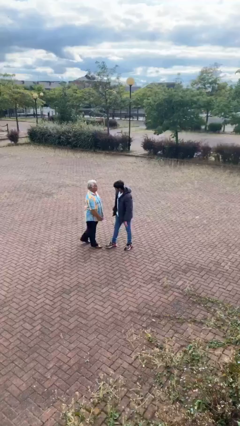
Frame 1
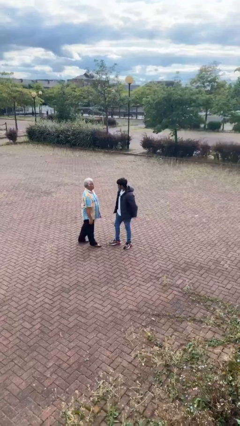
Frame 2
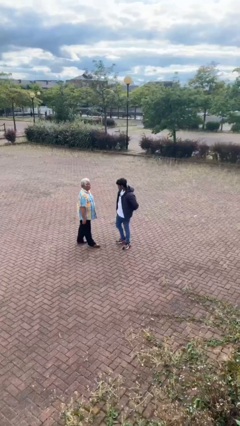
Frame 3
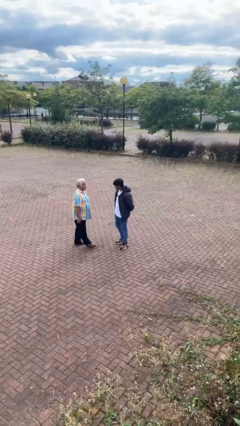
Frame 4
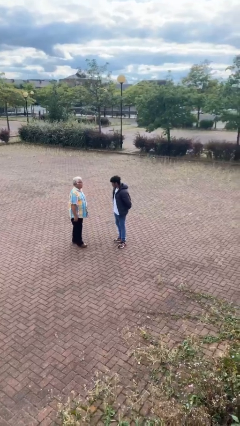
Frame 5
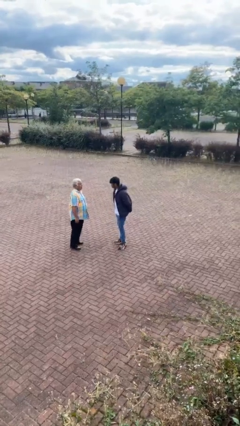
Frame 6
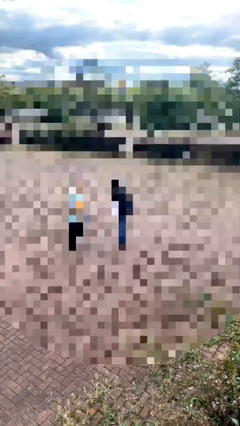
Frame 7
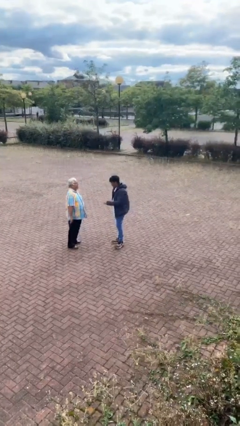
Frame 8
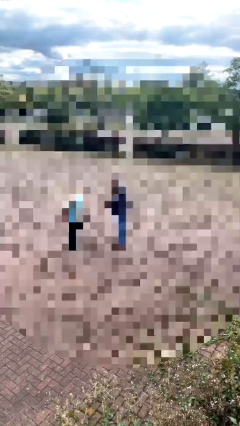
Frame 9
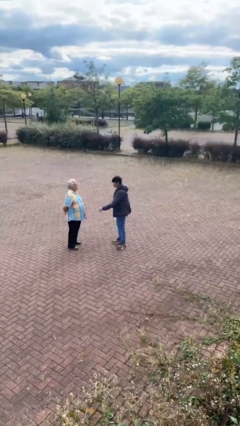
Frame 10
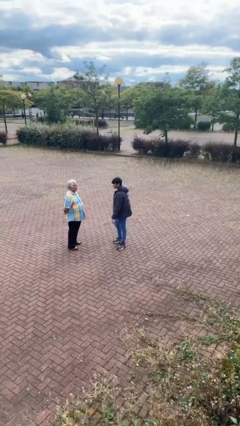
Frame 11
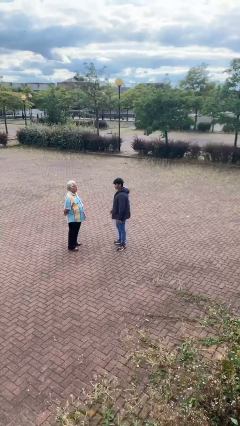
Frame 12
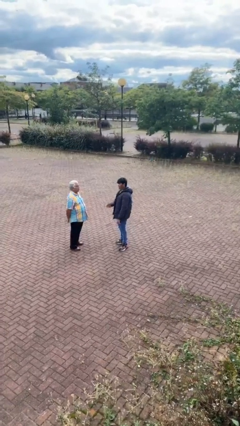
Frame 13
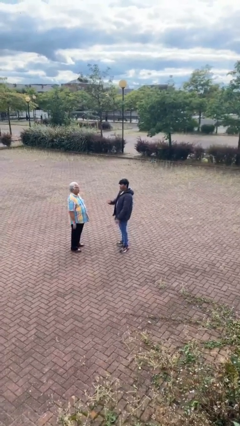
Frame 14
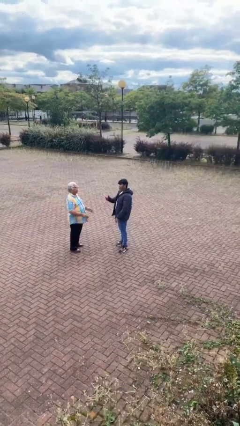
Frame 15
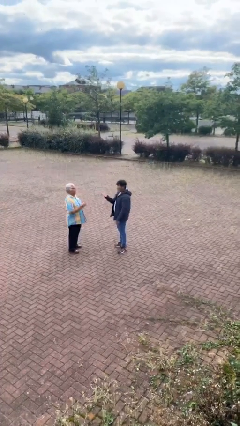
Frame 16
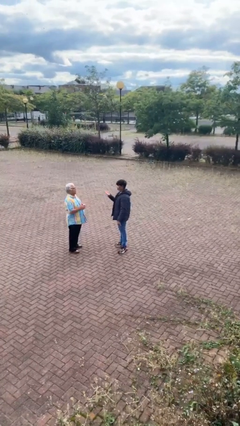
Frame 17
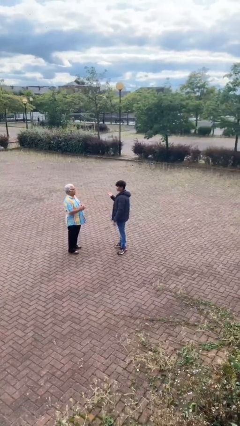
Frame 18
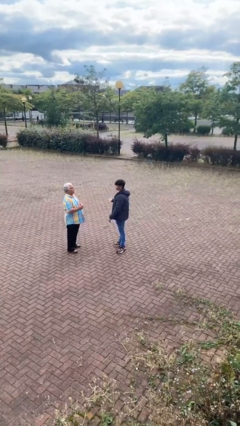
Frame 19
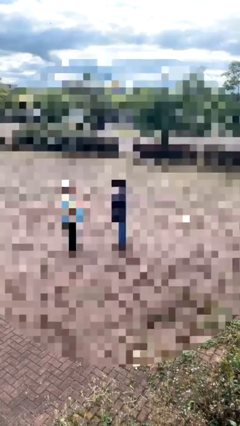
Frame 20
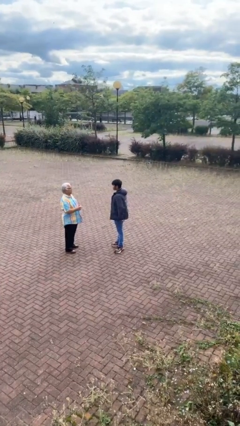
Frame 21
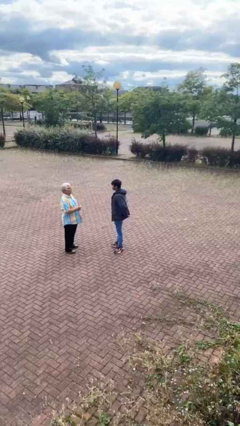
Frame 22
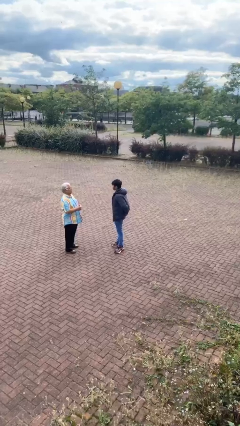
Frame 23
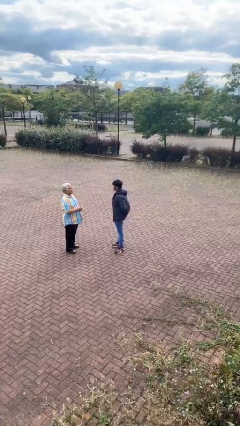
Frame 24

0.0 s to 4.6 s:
person talks to person

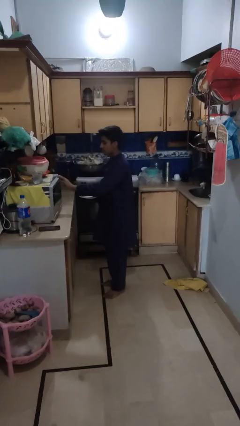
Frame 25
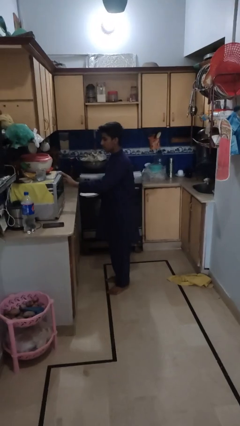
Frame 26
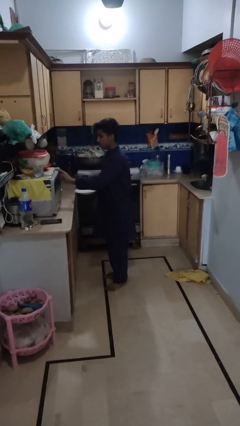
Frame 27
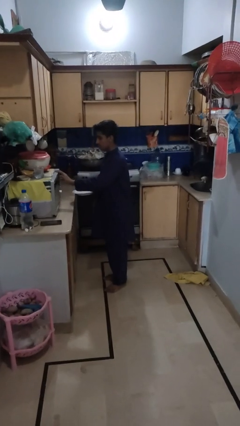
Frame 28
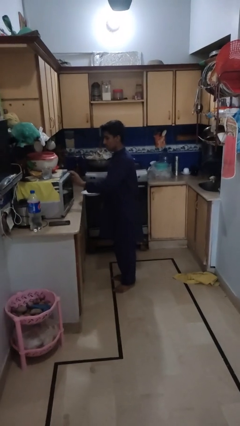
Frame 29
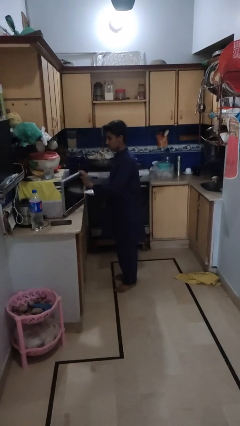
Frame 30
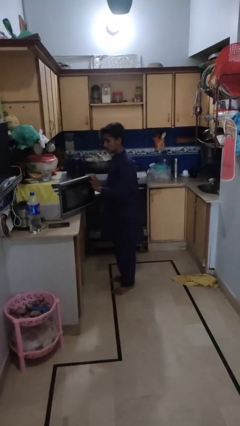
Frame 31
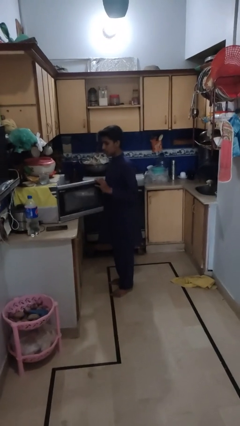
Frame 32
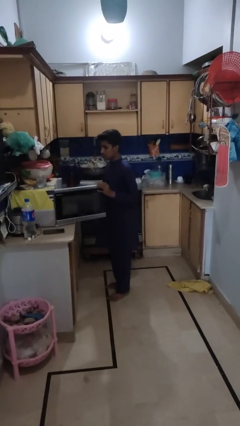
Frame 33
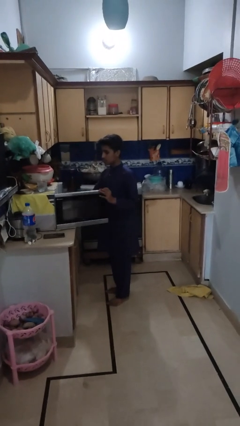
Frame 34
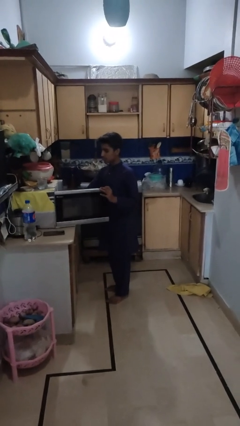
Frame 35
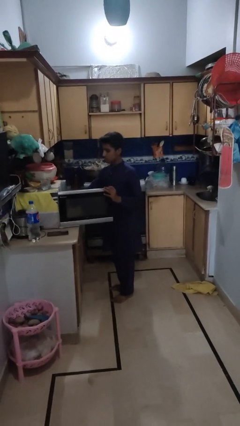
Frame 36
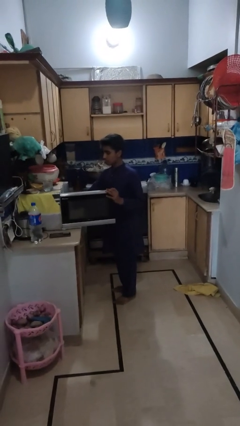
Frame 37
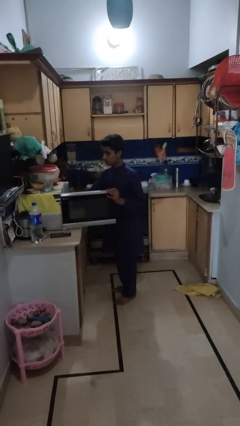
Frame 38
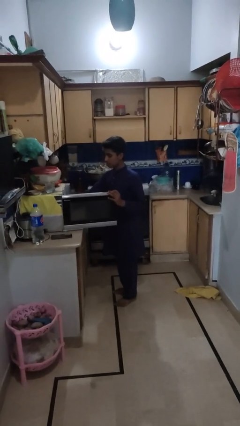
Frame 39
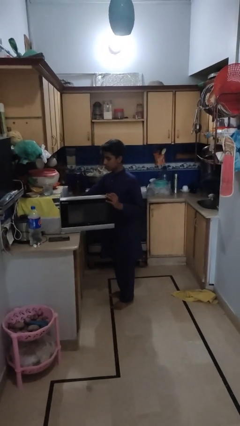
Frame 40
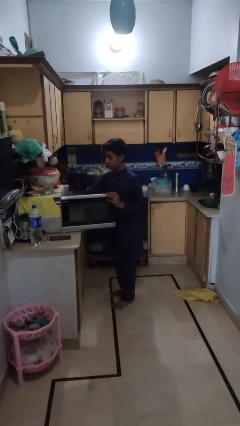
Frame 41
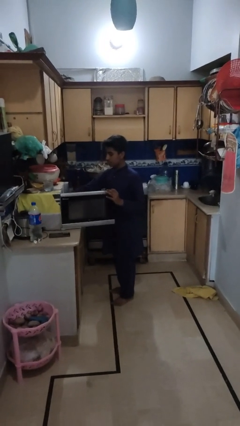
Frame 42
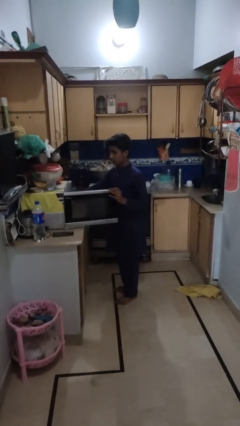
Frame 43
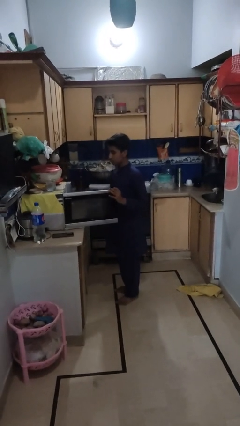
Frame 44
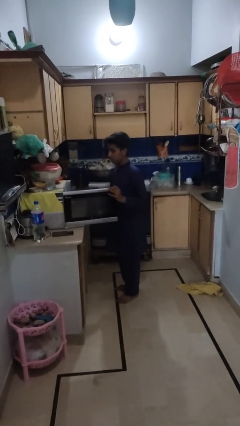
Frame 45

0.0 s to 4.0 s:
person puts object into microwave

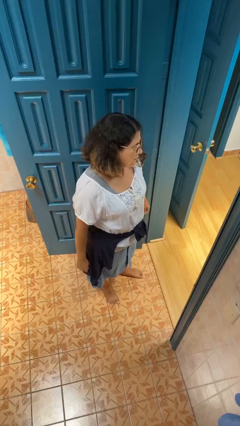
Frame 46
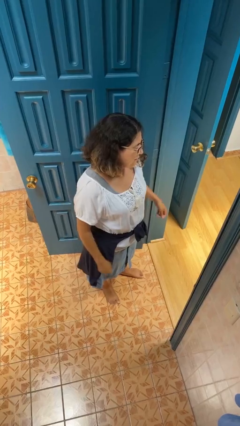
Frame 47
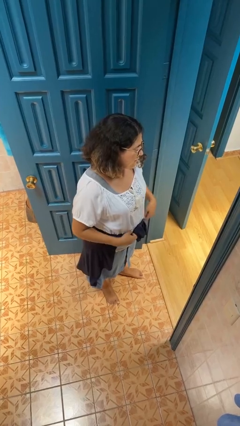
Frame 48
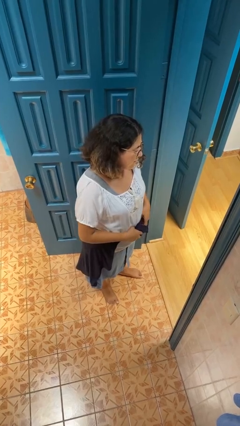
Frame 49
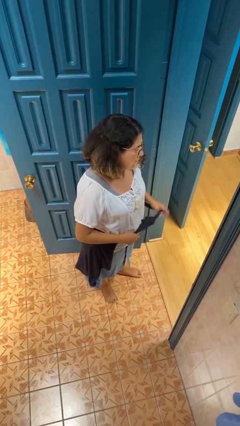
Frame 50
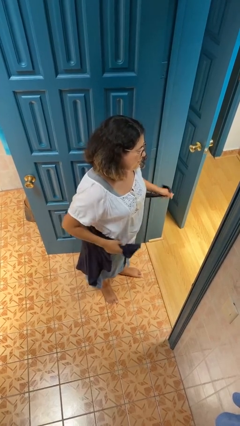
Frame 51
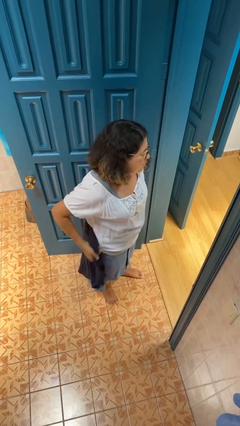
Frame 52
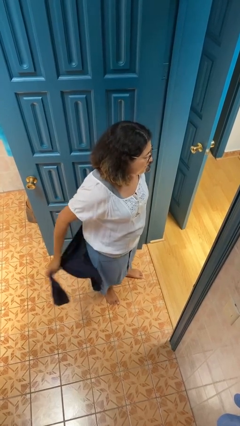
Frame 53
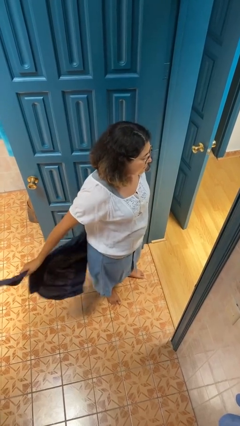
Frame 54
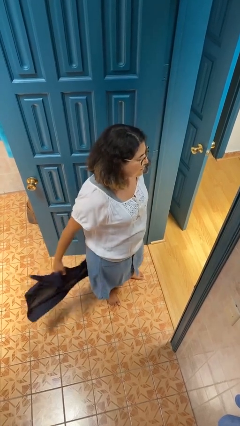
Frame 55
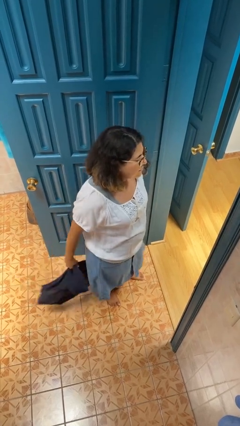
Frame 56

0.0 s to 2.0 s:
person unties jacket around waist

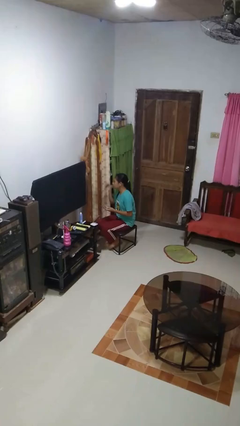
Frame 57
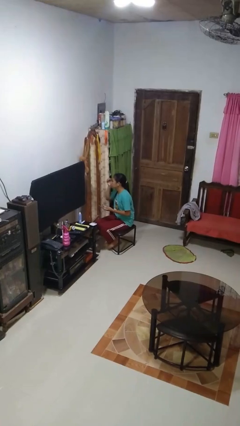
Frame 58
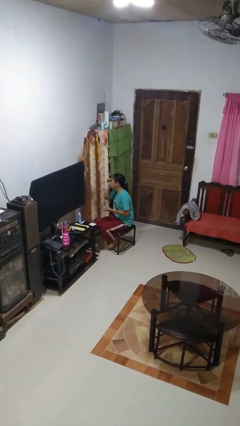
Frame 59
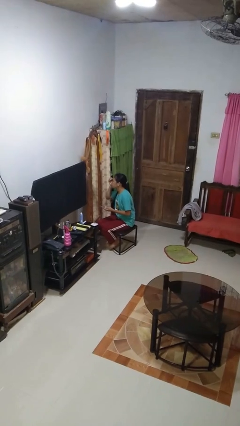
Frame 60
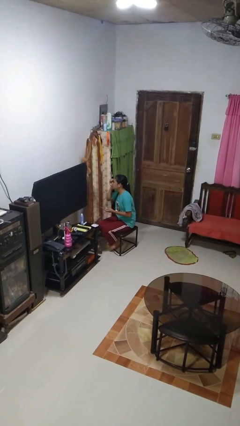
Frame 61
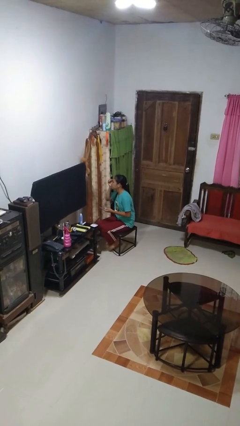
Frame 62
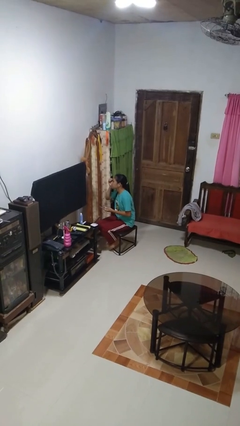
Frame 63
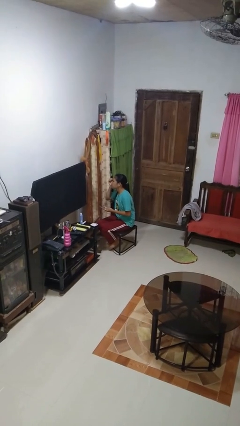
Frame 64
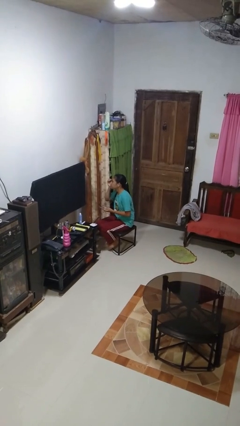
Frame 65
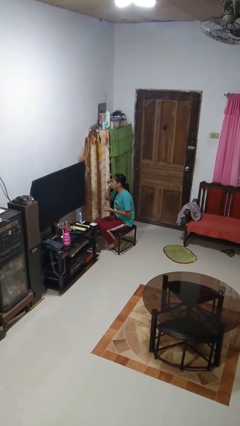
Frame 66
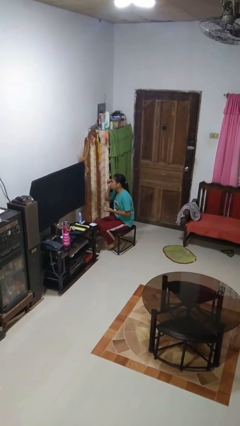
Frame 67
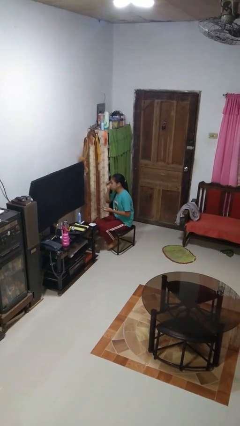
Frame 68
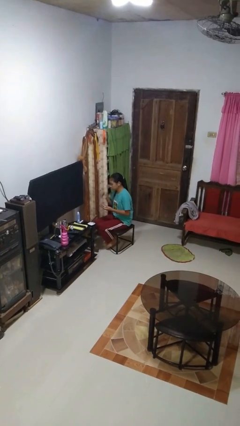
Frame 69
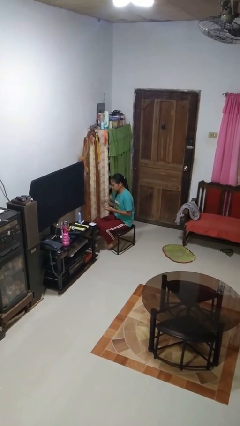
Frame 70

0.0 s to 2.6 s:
person applies eye makeup

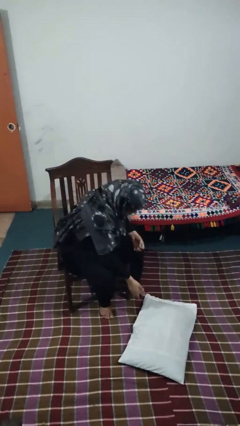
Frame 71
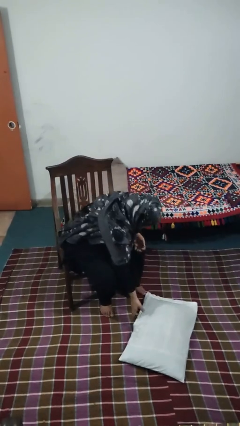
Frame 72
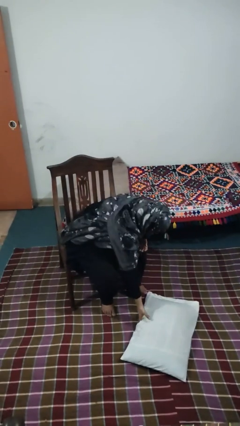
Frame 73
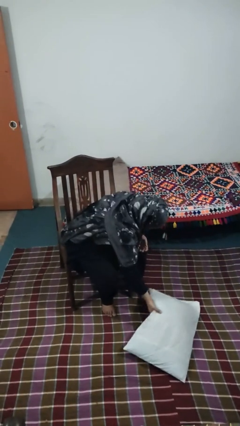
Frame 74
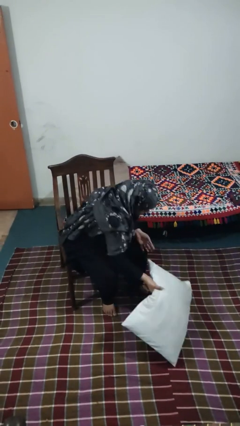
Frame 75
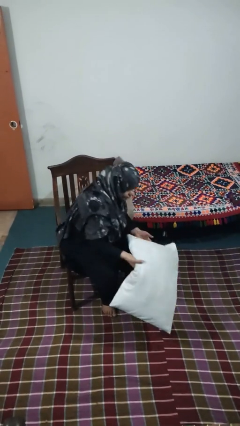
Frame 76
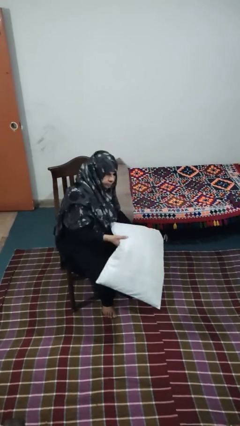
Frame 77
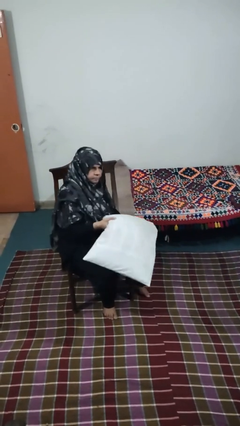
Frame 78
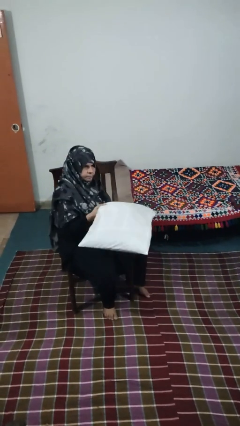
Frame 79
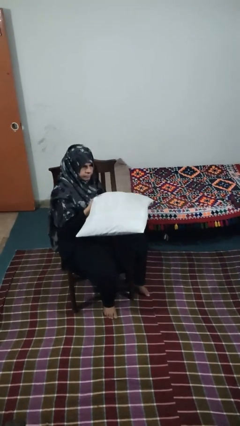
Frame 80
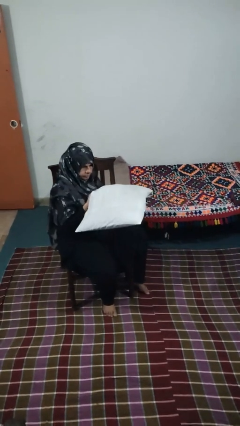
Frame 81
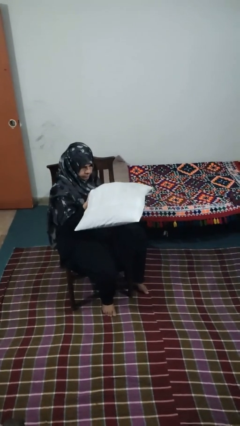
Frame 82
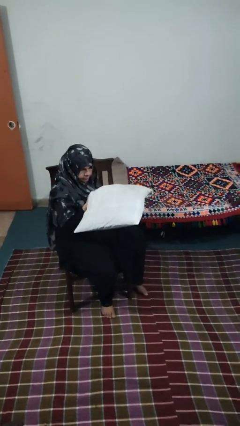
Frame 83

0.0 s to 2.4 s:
person picks up object from floor

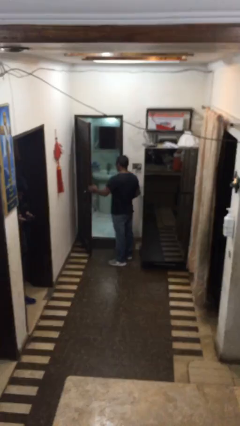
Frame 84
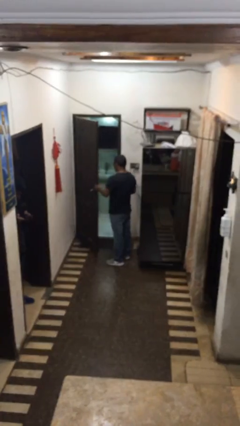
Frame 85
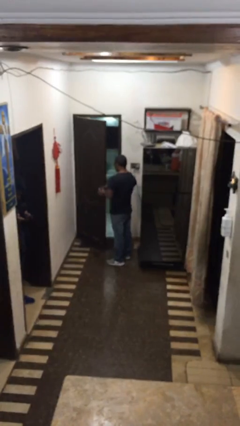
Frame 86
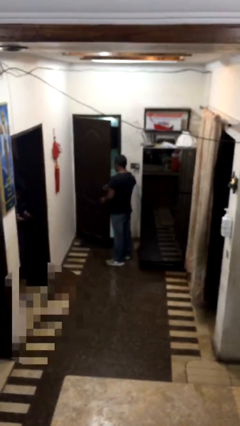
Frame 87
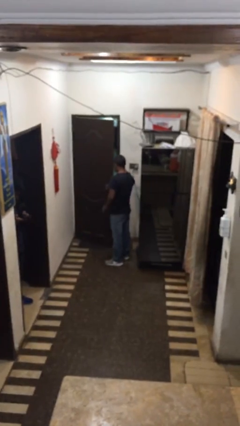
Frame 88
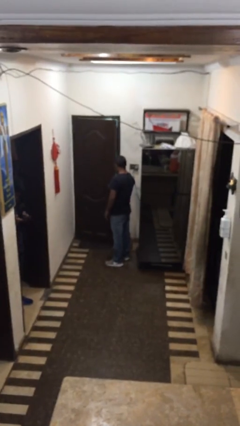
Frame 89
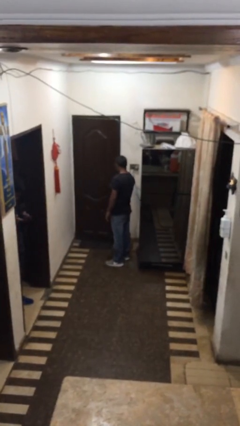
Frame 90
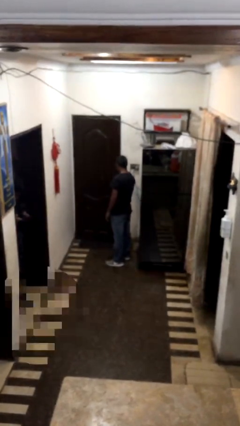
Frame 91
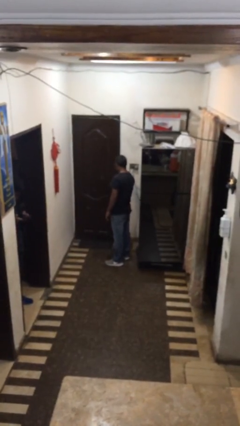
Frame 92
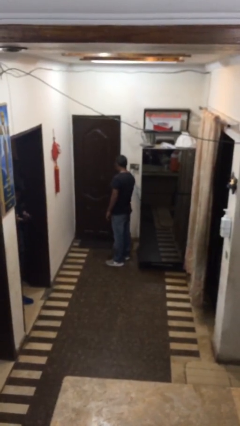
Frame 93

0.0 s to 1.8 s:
person closes facility door
